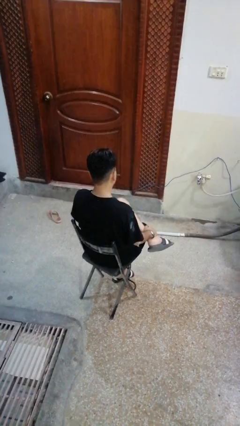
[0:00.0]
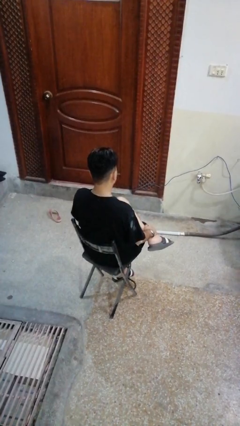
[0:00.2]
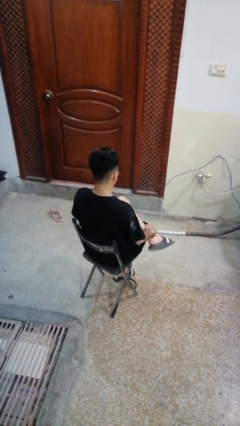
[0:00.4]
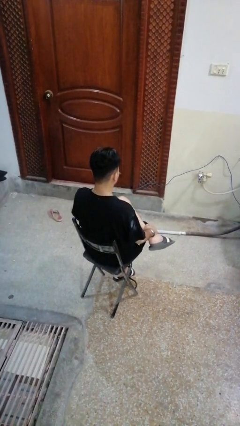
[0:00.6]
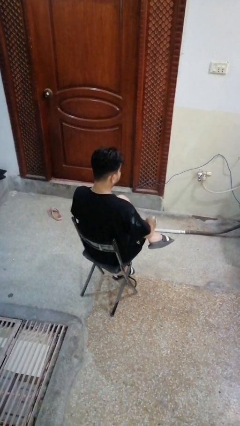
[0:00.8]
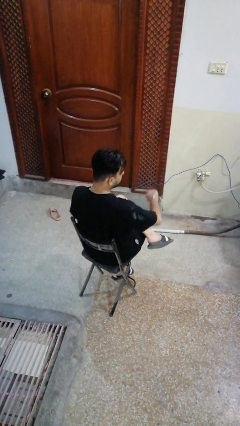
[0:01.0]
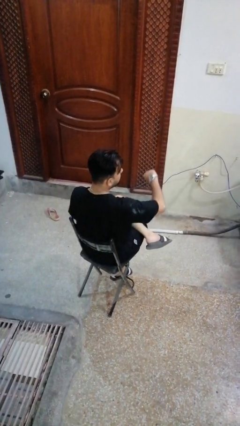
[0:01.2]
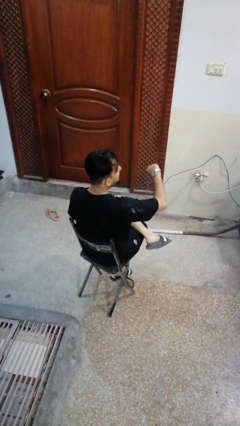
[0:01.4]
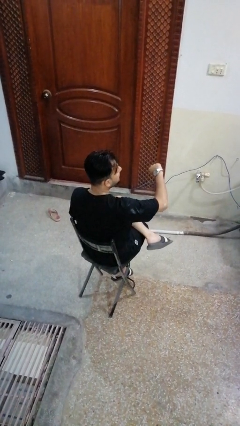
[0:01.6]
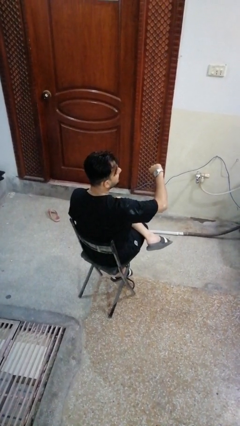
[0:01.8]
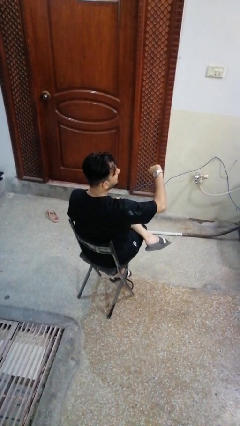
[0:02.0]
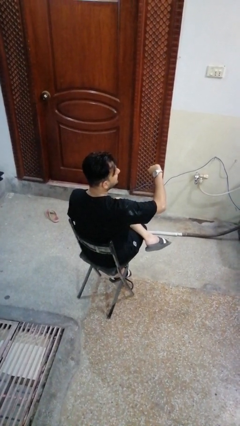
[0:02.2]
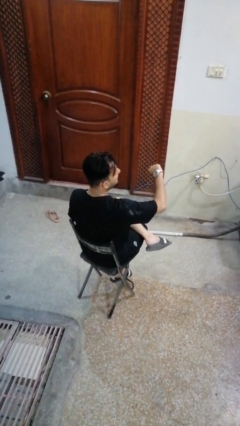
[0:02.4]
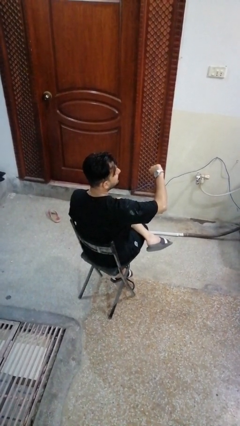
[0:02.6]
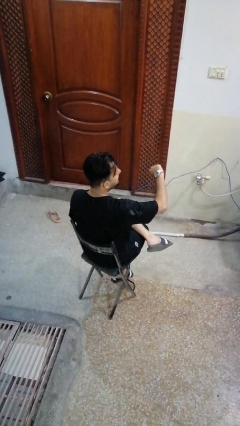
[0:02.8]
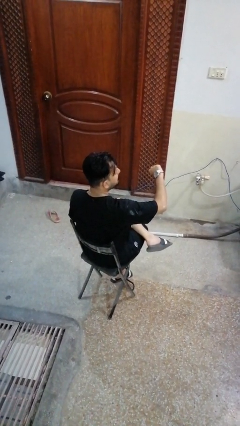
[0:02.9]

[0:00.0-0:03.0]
person looks at wristwatch

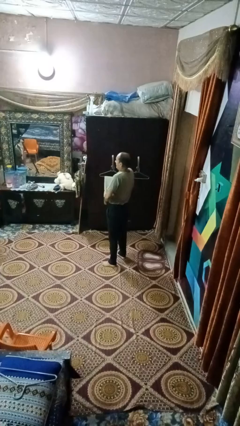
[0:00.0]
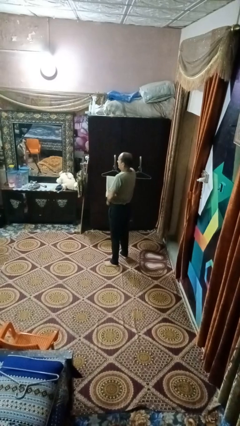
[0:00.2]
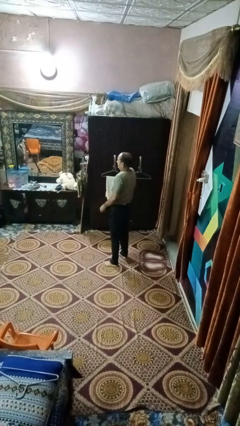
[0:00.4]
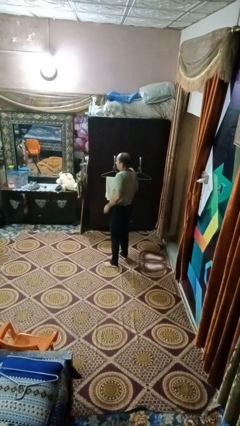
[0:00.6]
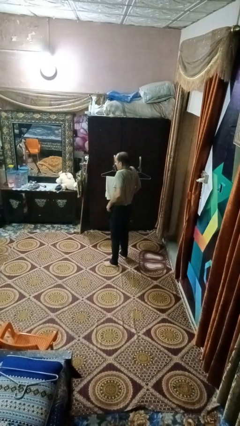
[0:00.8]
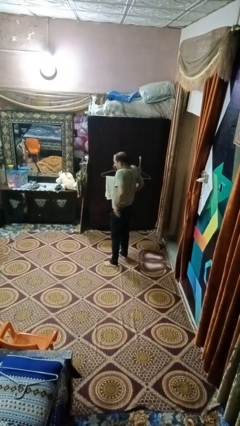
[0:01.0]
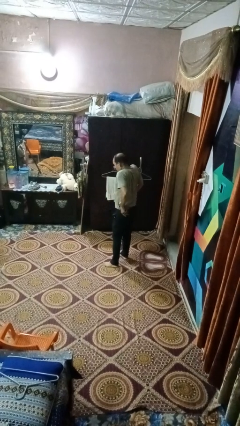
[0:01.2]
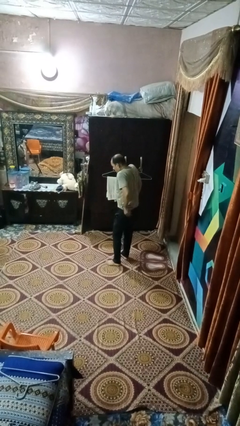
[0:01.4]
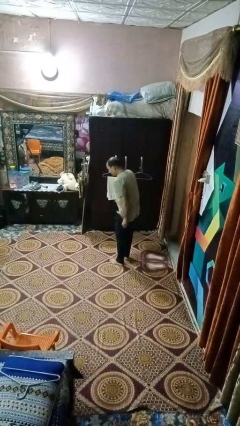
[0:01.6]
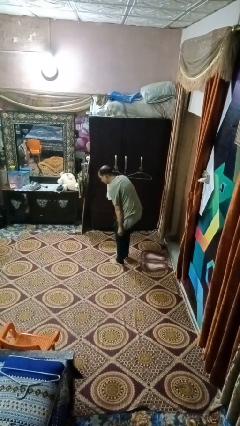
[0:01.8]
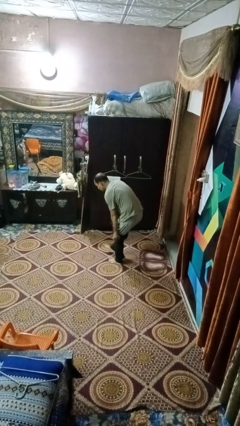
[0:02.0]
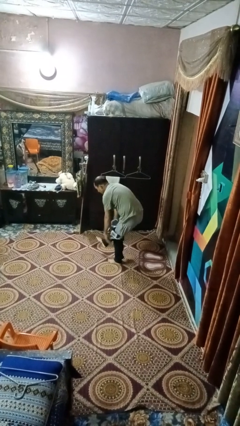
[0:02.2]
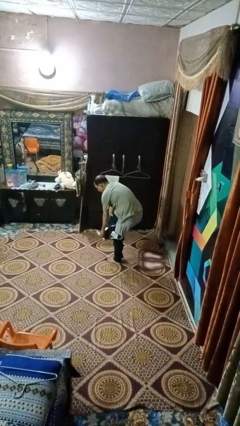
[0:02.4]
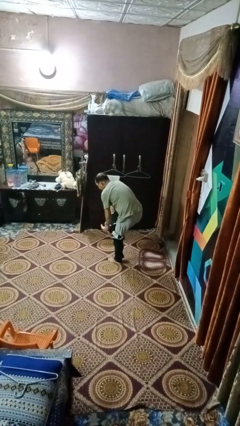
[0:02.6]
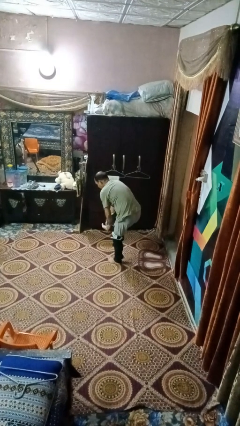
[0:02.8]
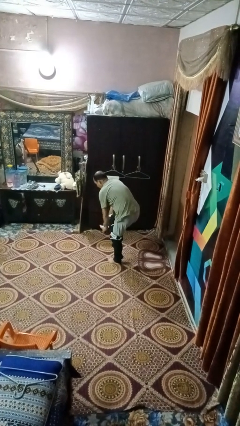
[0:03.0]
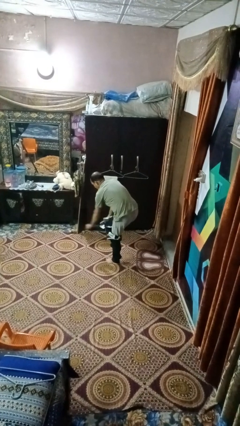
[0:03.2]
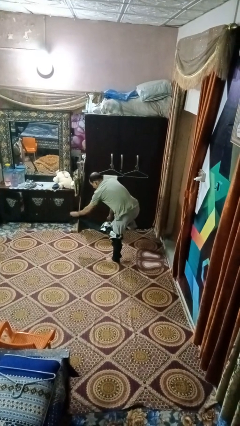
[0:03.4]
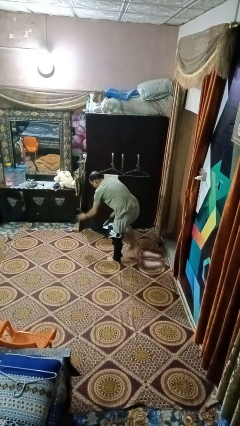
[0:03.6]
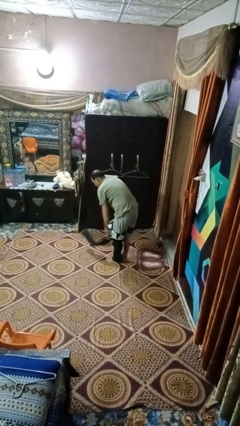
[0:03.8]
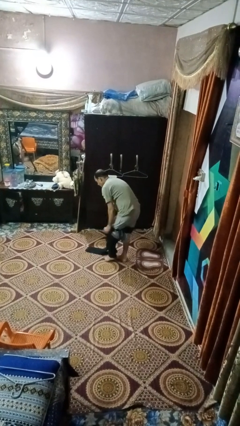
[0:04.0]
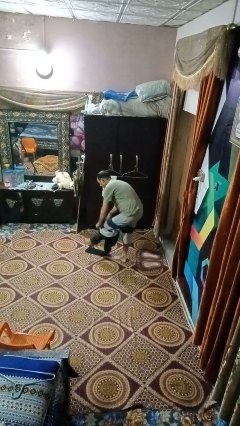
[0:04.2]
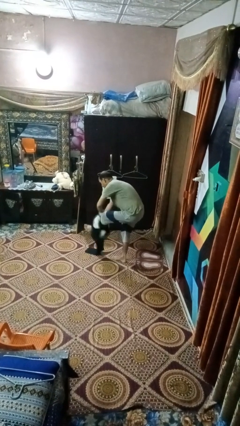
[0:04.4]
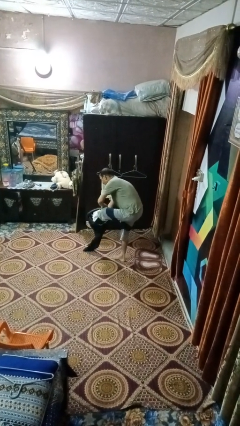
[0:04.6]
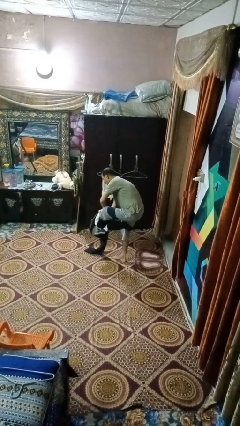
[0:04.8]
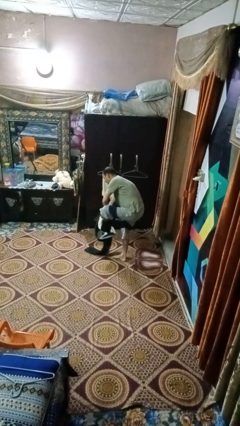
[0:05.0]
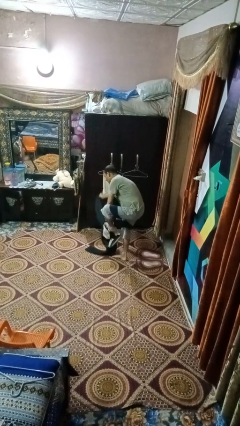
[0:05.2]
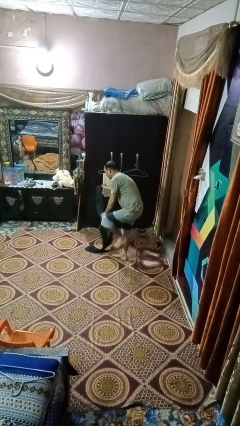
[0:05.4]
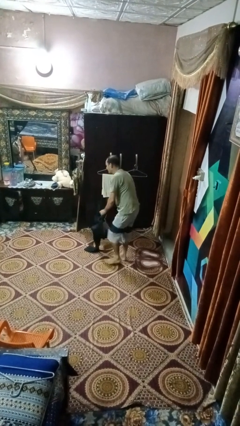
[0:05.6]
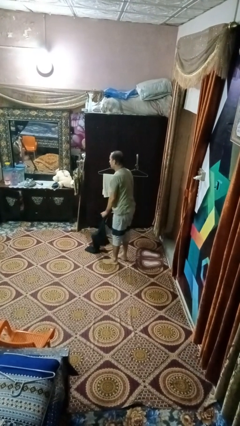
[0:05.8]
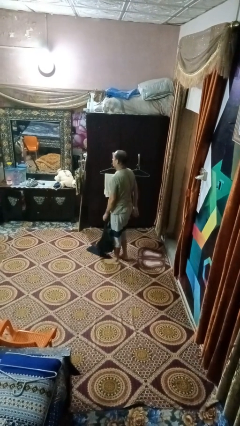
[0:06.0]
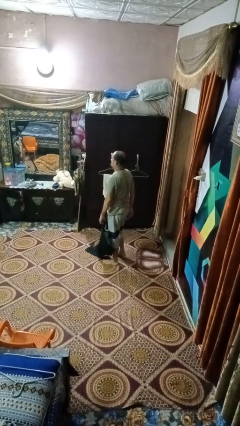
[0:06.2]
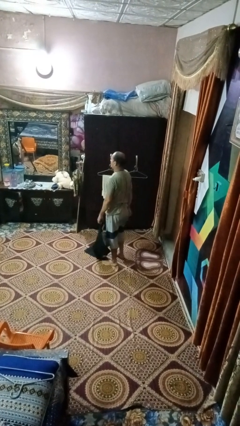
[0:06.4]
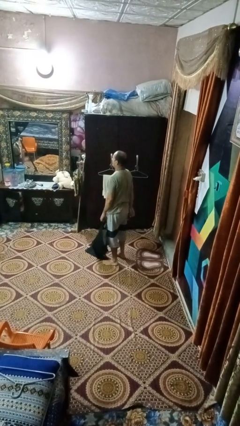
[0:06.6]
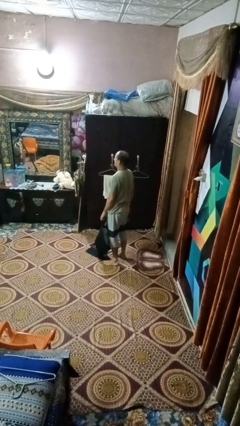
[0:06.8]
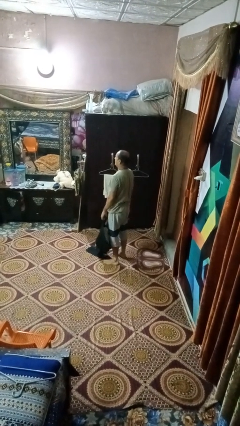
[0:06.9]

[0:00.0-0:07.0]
person takes off pants

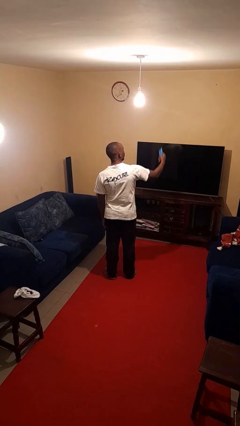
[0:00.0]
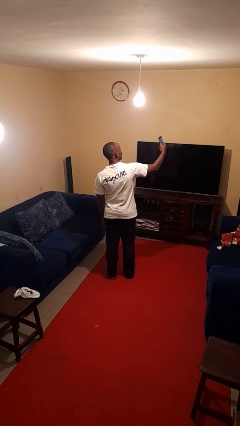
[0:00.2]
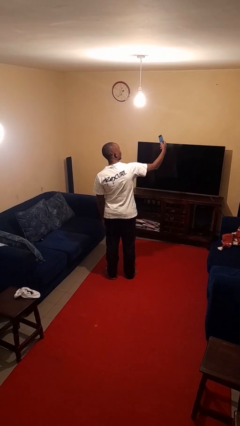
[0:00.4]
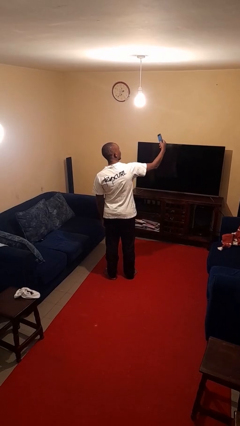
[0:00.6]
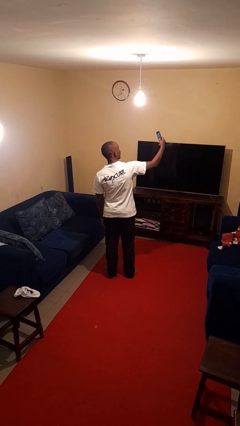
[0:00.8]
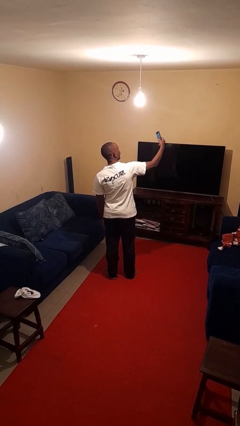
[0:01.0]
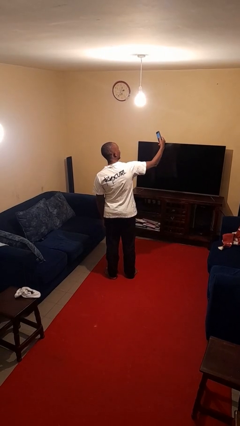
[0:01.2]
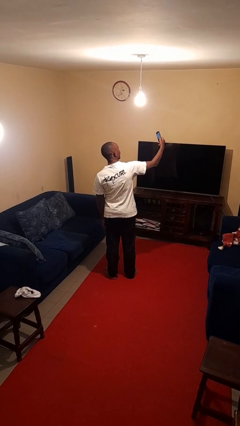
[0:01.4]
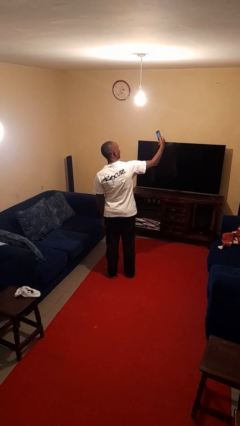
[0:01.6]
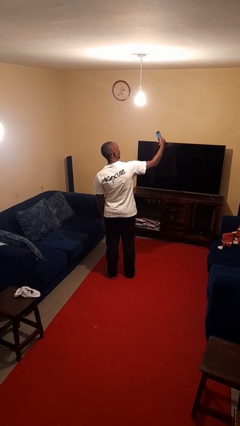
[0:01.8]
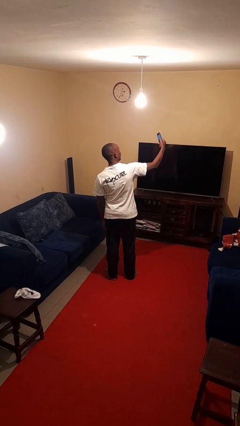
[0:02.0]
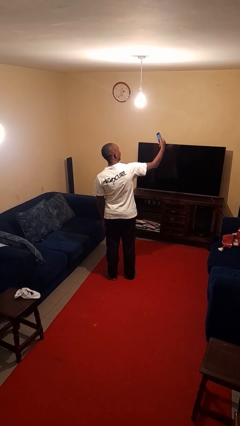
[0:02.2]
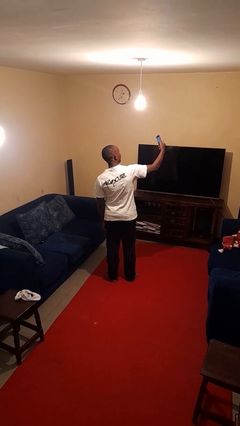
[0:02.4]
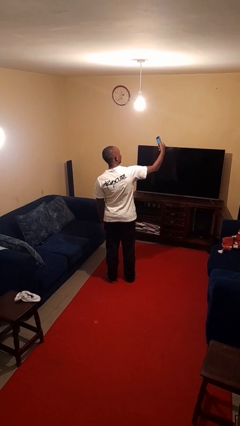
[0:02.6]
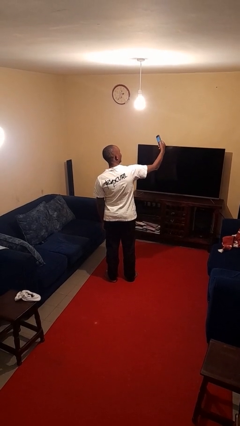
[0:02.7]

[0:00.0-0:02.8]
person takes selfie

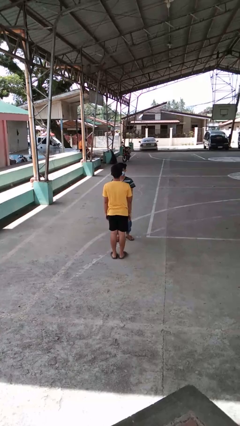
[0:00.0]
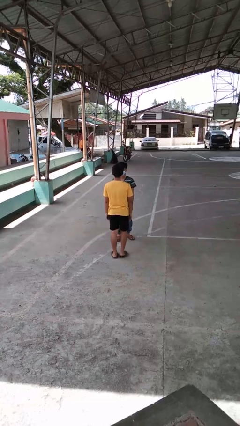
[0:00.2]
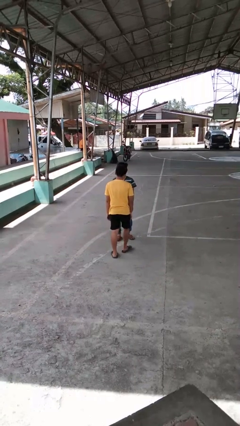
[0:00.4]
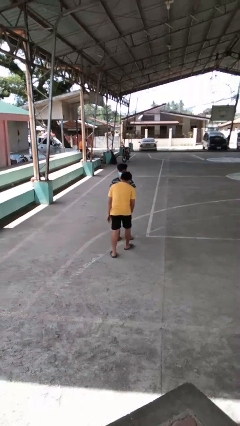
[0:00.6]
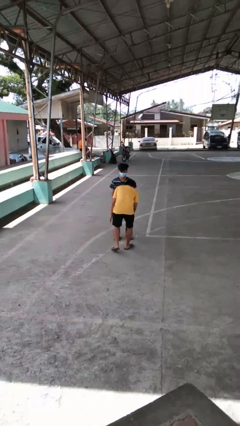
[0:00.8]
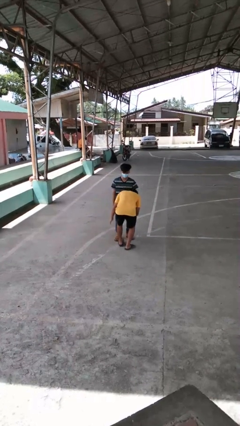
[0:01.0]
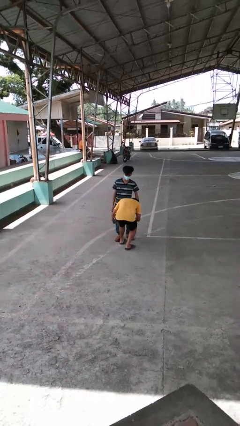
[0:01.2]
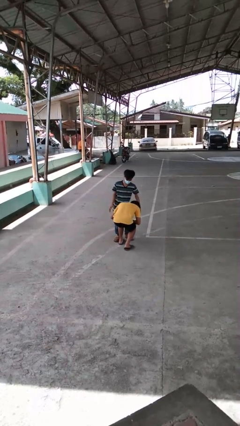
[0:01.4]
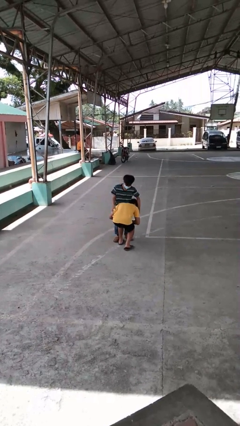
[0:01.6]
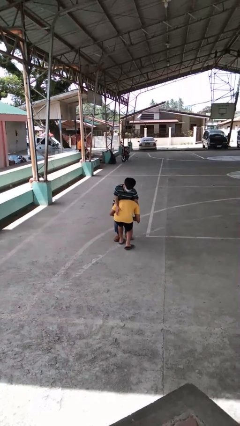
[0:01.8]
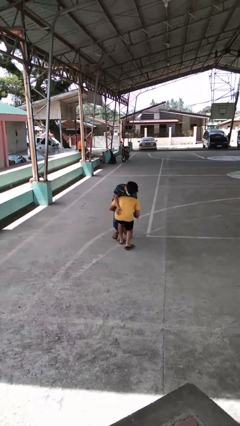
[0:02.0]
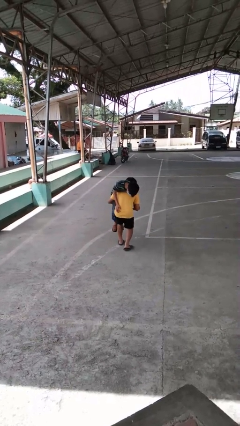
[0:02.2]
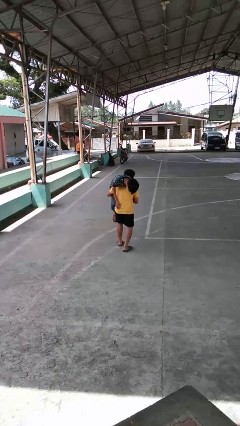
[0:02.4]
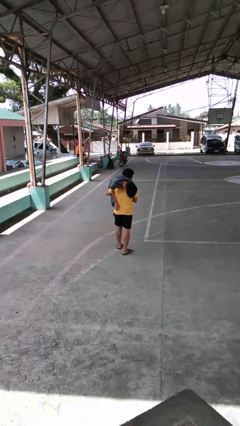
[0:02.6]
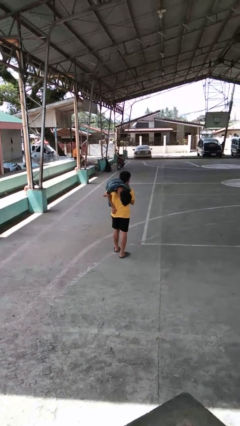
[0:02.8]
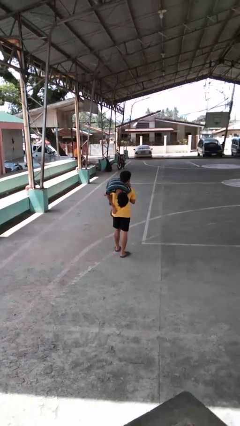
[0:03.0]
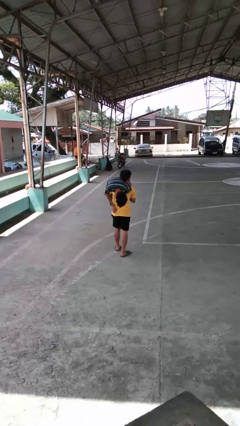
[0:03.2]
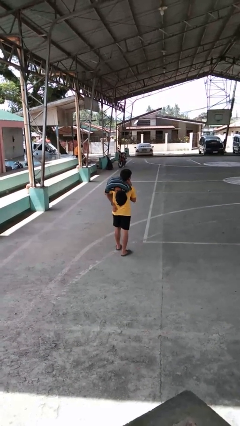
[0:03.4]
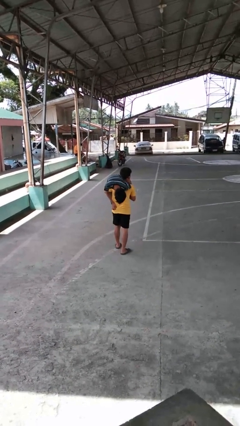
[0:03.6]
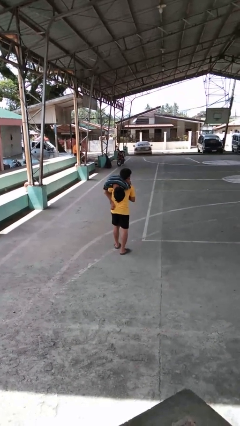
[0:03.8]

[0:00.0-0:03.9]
person carries person over shoulder

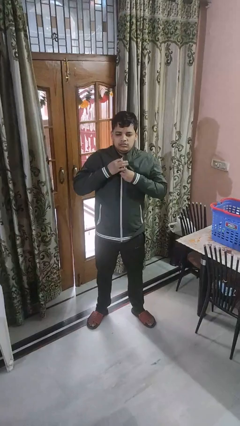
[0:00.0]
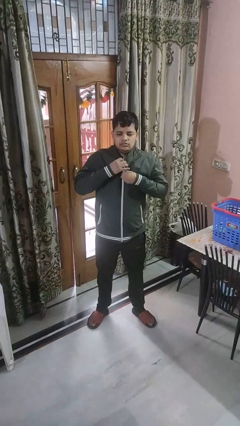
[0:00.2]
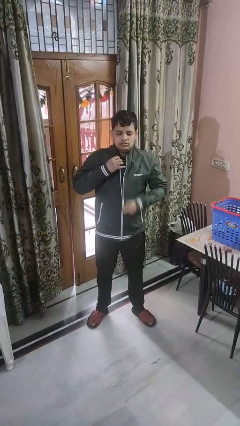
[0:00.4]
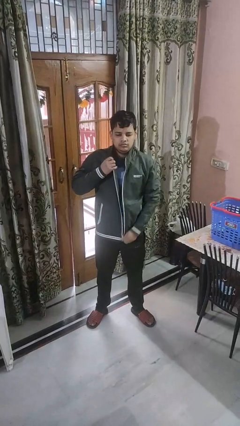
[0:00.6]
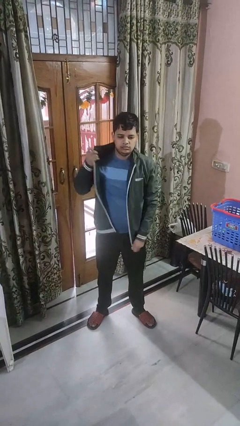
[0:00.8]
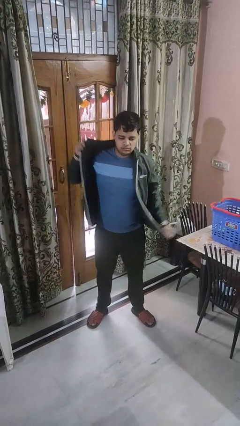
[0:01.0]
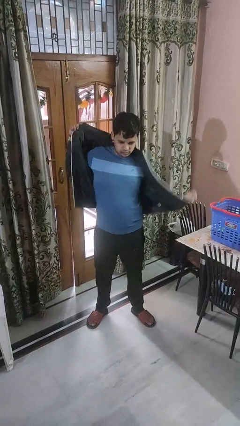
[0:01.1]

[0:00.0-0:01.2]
person unzips jacket
